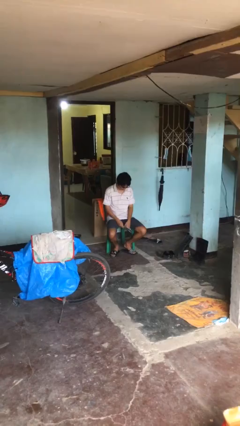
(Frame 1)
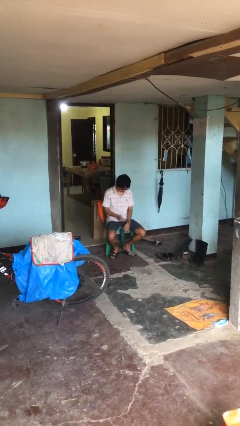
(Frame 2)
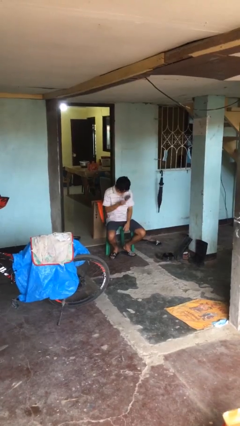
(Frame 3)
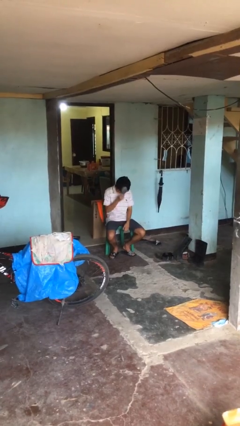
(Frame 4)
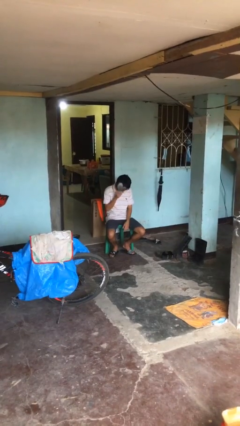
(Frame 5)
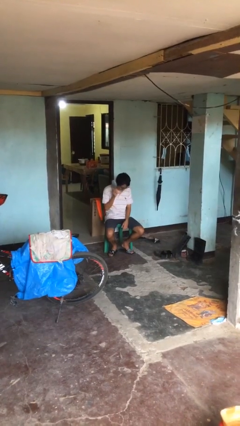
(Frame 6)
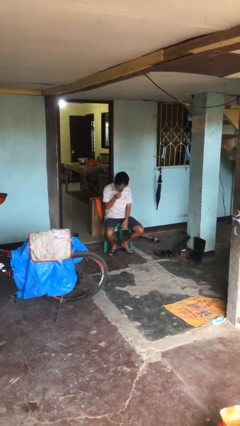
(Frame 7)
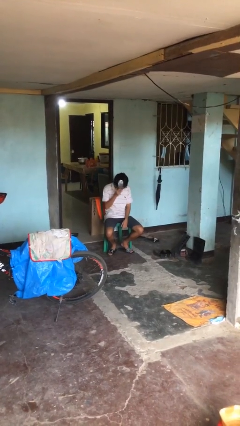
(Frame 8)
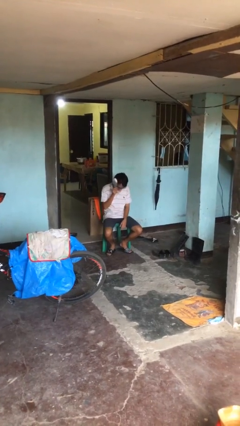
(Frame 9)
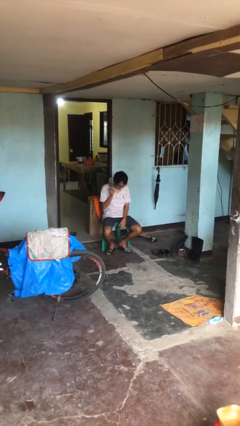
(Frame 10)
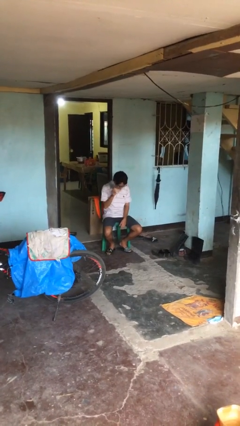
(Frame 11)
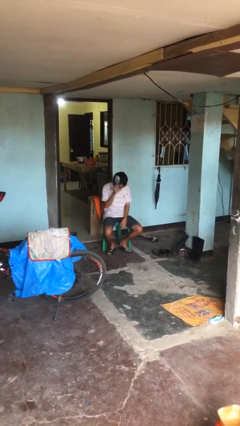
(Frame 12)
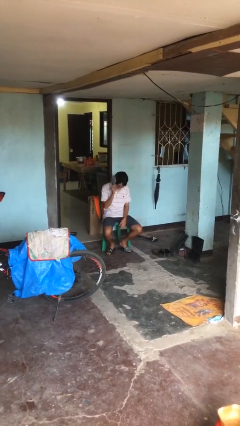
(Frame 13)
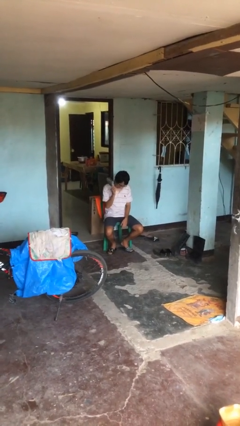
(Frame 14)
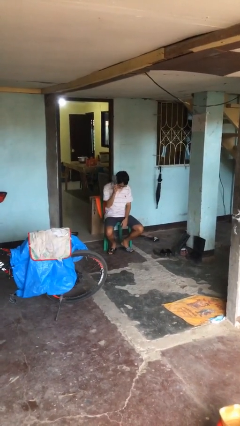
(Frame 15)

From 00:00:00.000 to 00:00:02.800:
person brushes hair

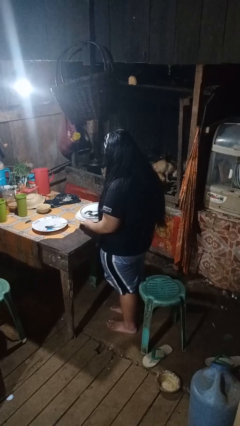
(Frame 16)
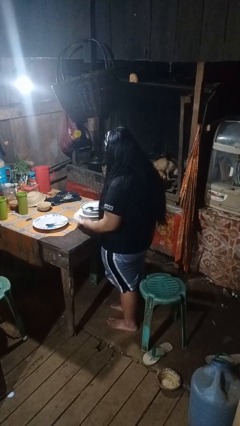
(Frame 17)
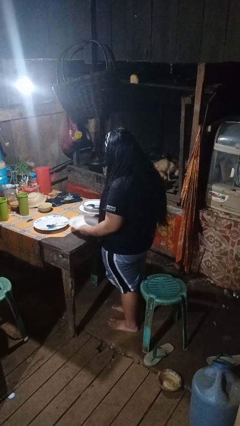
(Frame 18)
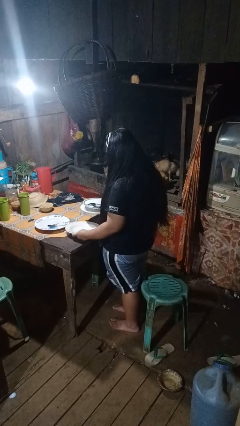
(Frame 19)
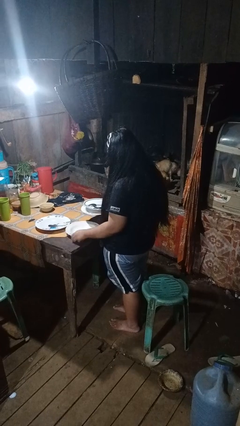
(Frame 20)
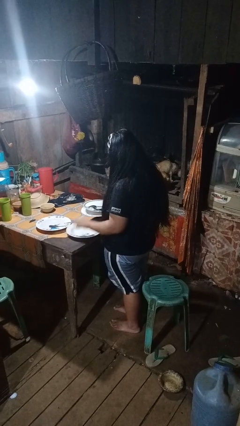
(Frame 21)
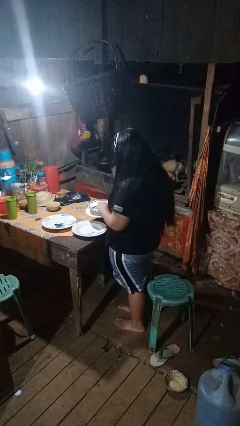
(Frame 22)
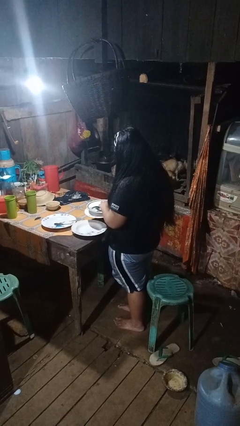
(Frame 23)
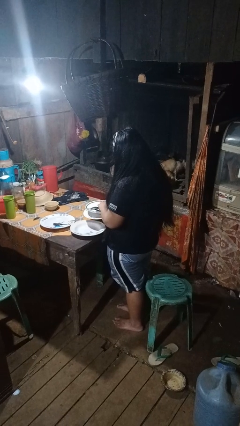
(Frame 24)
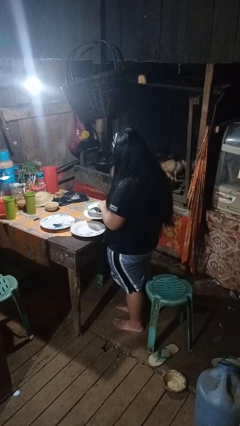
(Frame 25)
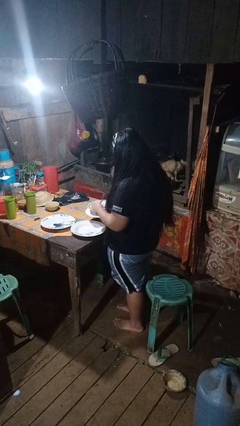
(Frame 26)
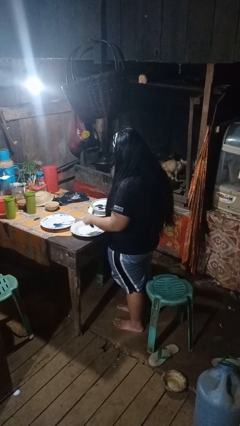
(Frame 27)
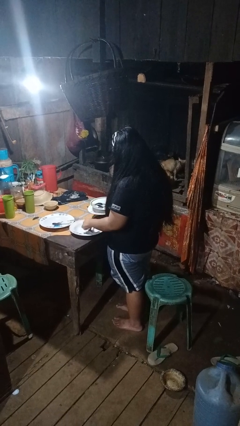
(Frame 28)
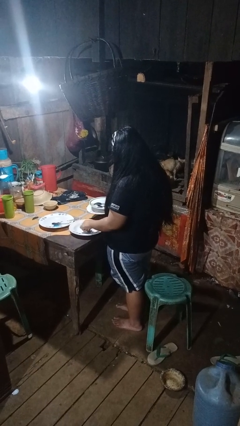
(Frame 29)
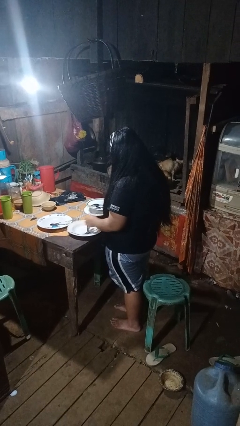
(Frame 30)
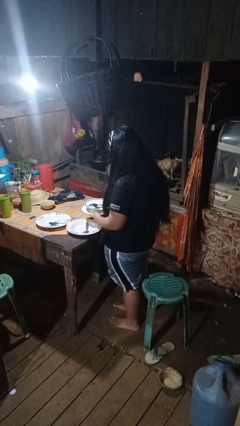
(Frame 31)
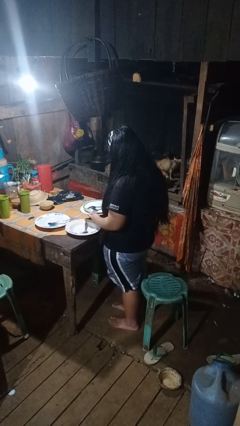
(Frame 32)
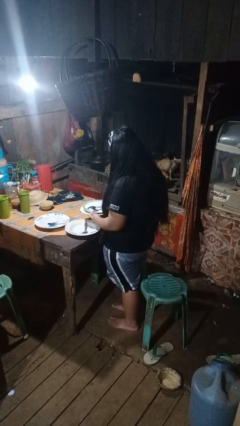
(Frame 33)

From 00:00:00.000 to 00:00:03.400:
person sets table

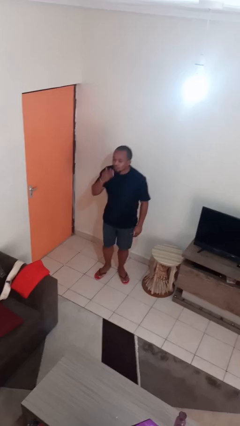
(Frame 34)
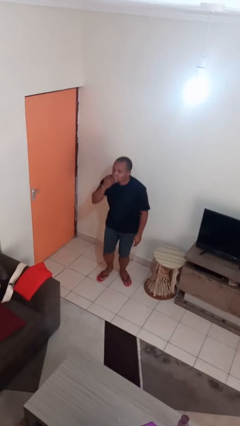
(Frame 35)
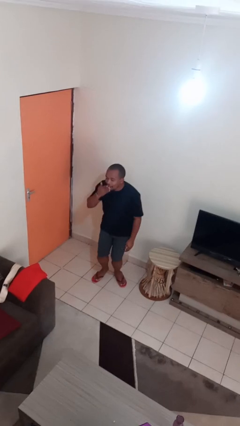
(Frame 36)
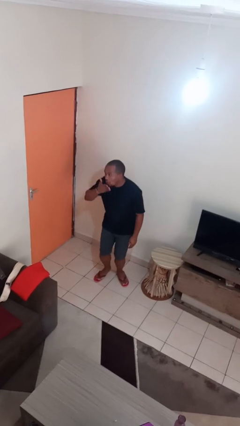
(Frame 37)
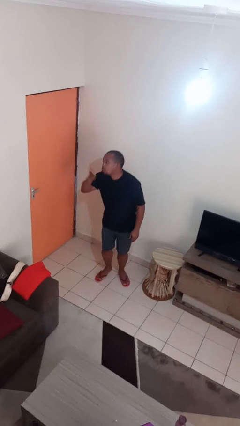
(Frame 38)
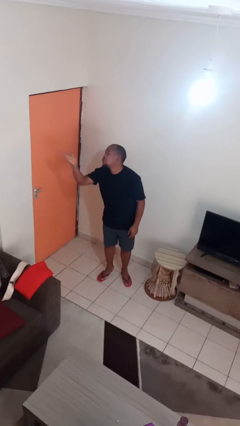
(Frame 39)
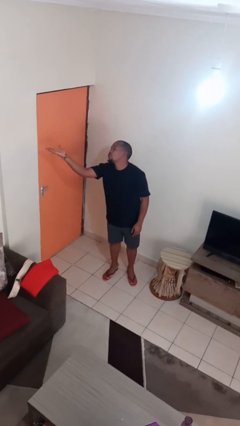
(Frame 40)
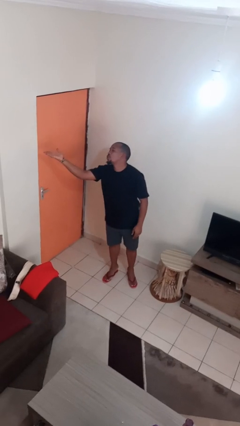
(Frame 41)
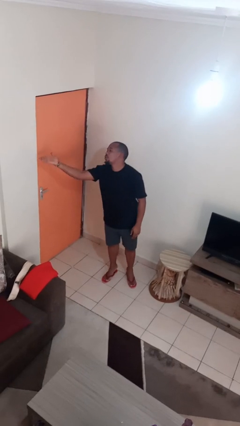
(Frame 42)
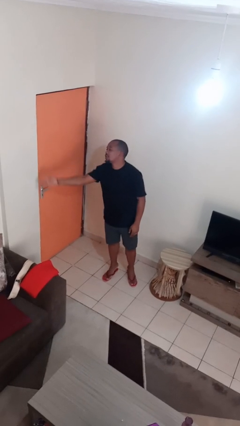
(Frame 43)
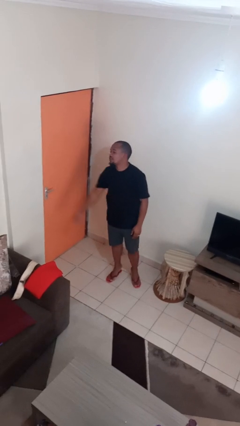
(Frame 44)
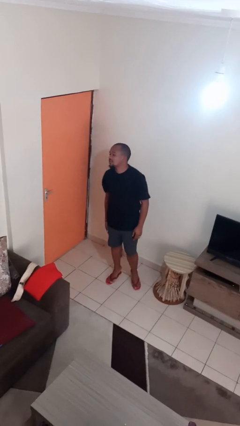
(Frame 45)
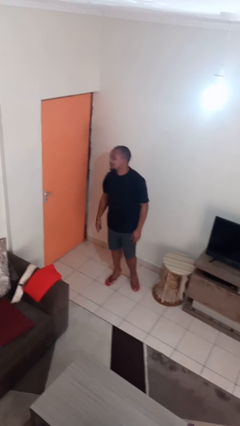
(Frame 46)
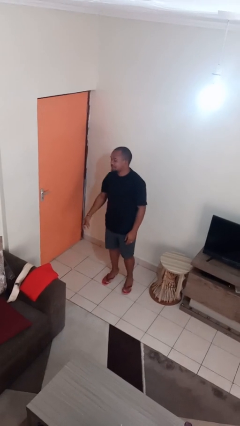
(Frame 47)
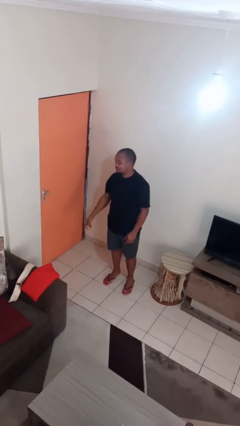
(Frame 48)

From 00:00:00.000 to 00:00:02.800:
person gestures blow kiss

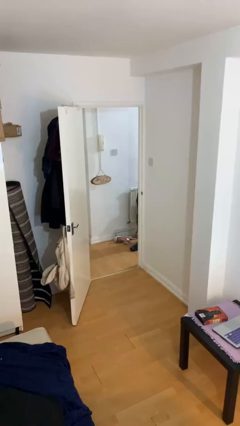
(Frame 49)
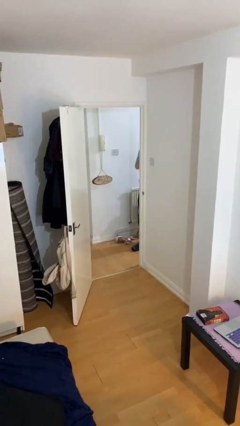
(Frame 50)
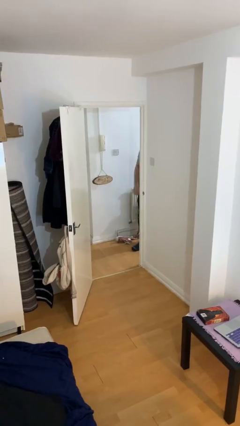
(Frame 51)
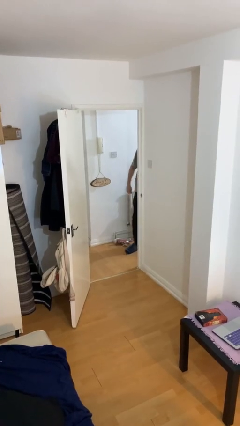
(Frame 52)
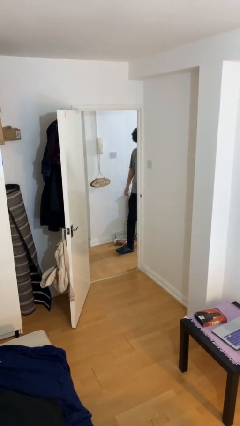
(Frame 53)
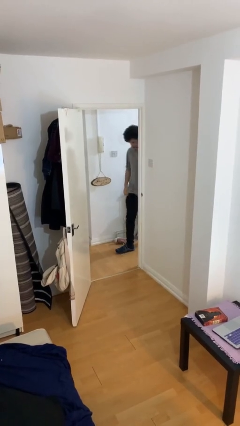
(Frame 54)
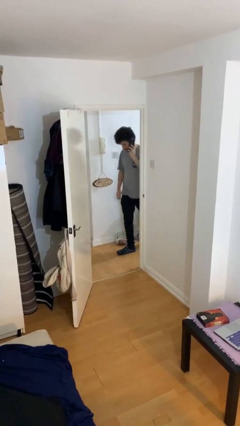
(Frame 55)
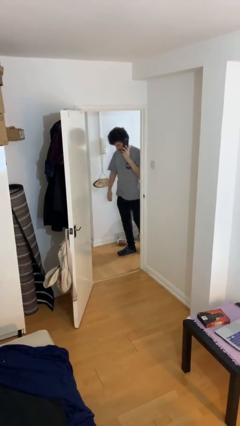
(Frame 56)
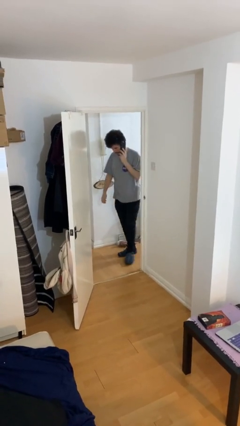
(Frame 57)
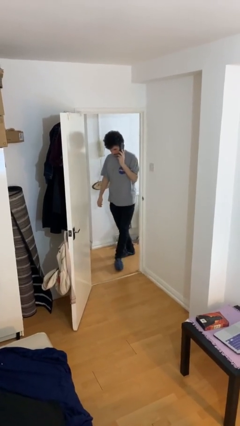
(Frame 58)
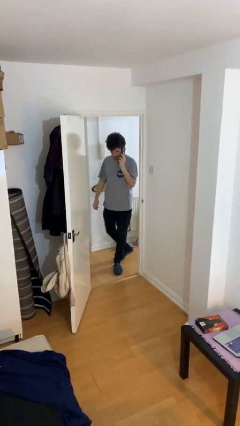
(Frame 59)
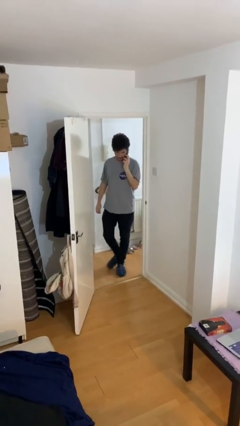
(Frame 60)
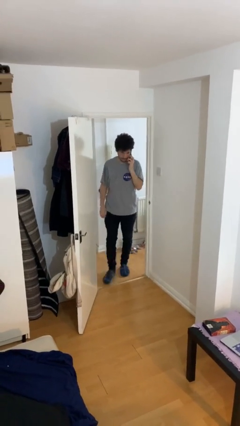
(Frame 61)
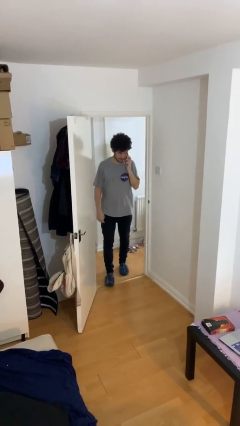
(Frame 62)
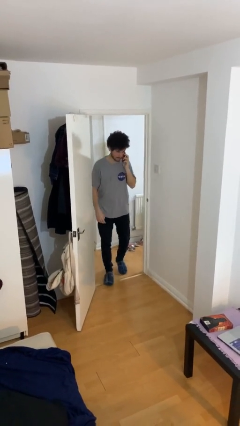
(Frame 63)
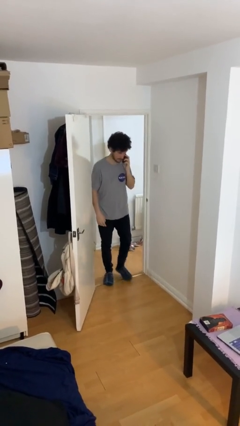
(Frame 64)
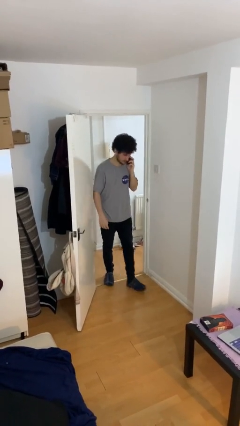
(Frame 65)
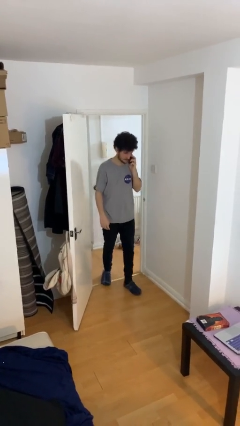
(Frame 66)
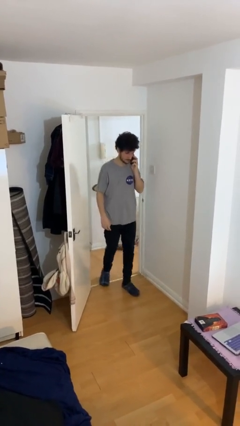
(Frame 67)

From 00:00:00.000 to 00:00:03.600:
person enters scene through structure

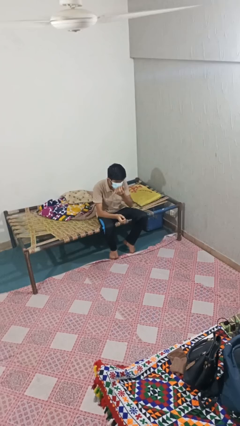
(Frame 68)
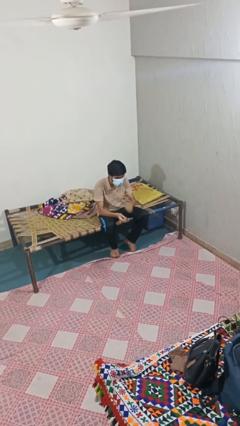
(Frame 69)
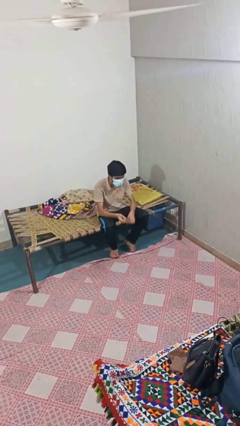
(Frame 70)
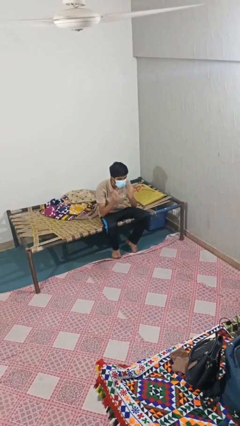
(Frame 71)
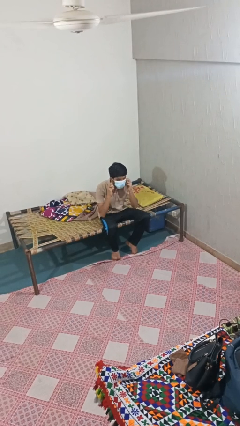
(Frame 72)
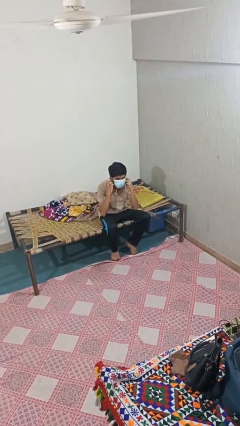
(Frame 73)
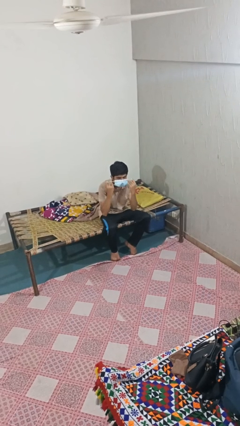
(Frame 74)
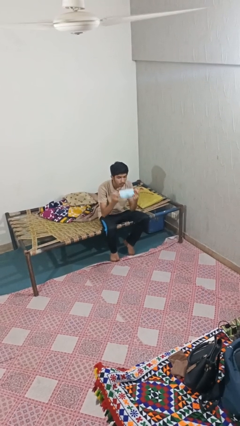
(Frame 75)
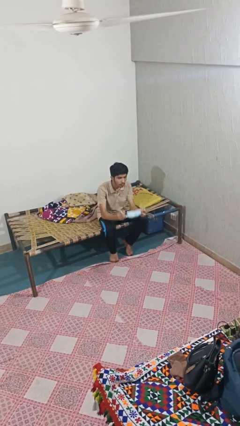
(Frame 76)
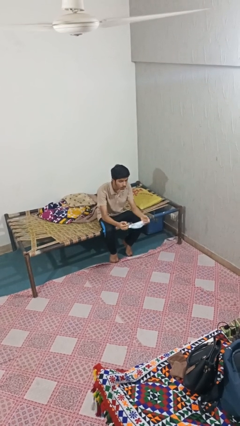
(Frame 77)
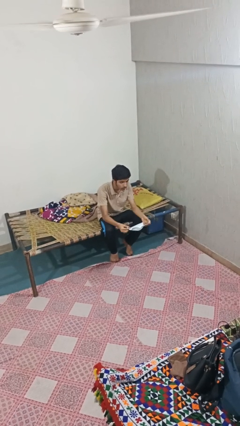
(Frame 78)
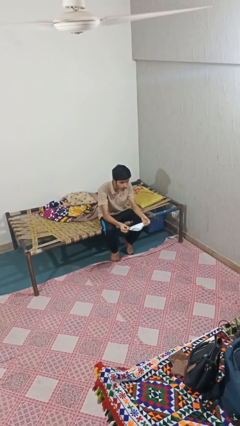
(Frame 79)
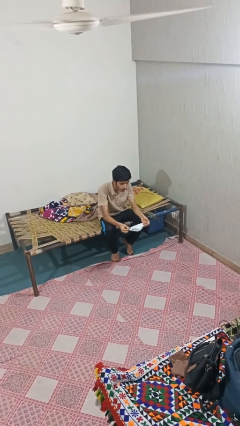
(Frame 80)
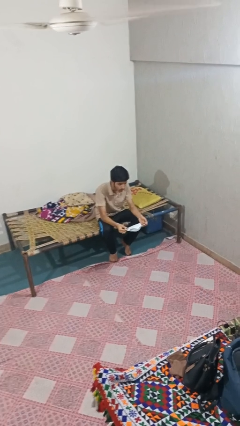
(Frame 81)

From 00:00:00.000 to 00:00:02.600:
person takes off facemask

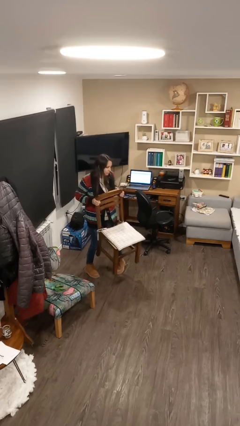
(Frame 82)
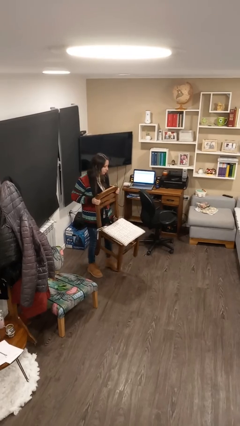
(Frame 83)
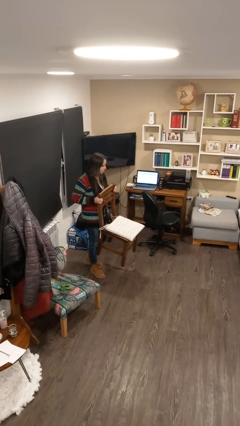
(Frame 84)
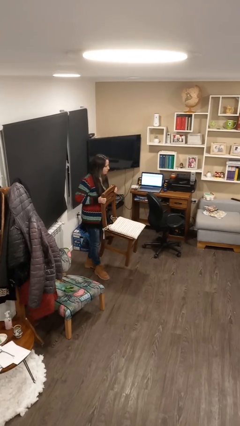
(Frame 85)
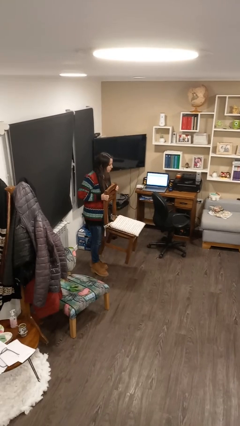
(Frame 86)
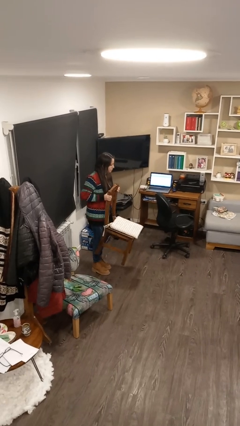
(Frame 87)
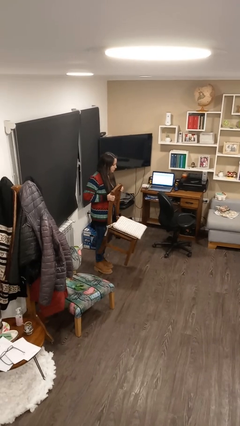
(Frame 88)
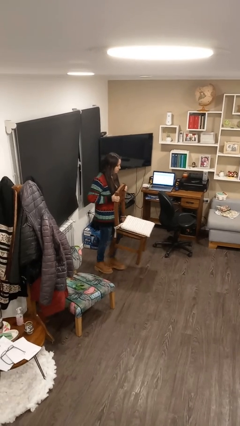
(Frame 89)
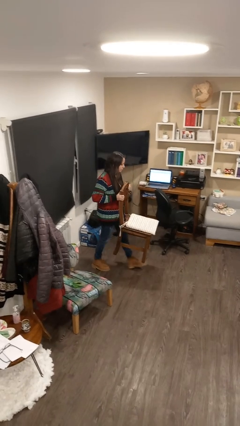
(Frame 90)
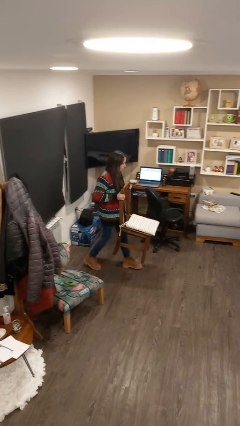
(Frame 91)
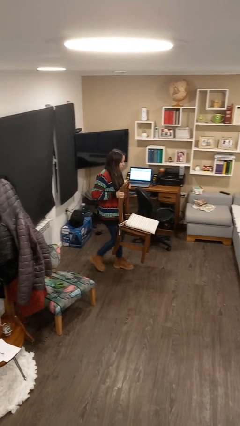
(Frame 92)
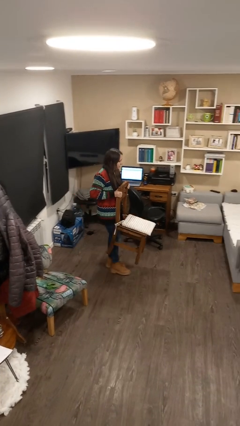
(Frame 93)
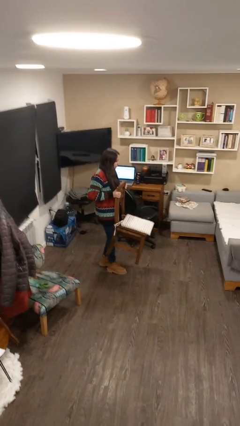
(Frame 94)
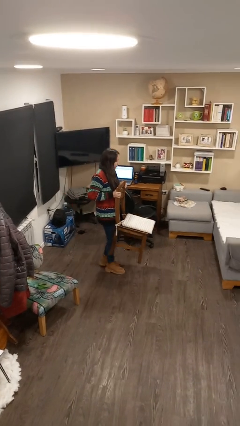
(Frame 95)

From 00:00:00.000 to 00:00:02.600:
person carries furniture
